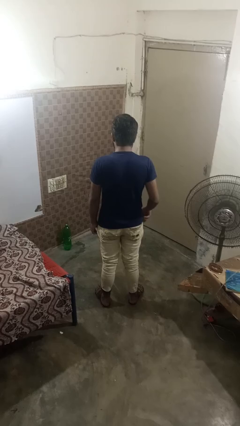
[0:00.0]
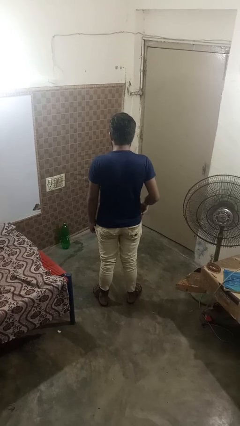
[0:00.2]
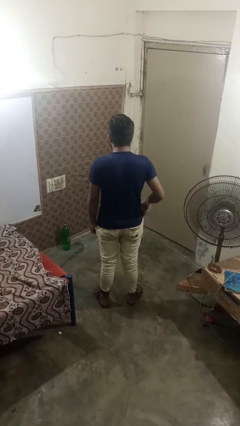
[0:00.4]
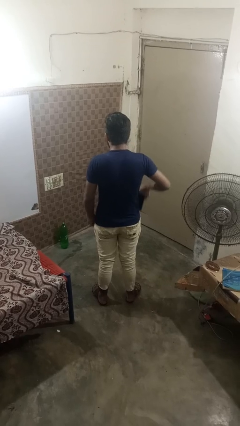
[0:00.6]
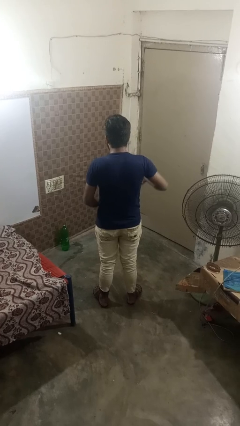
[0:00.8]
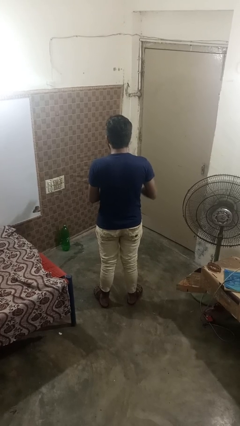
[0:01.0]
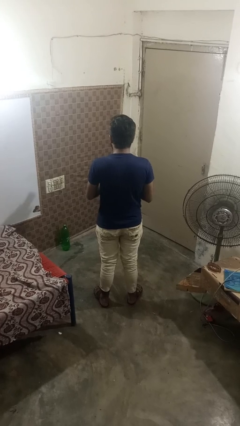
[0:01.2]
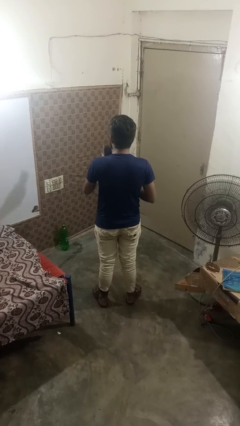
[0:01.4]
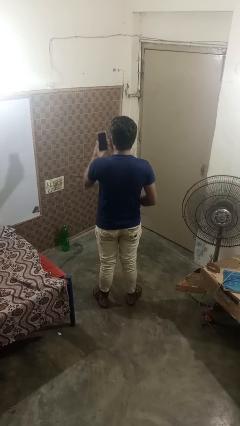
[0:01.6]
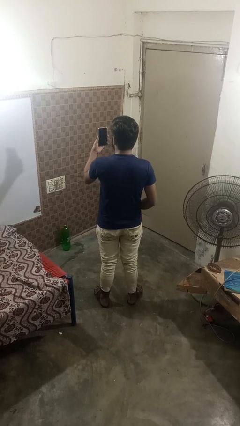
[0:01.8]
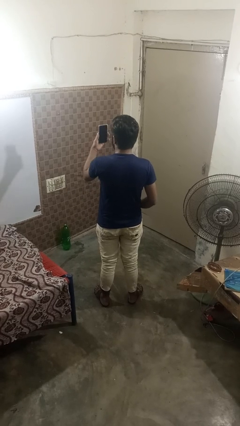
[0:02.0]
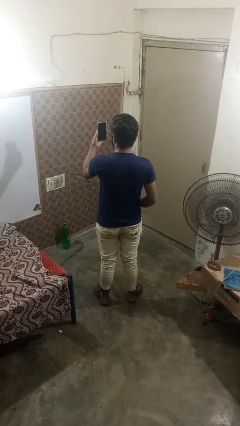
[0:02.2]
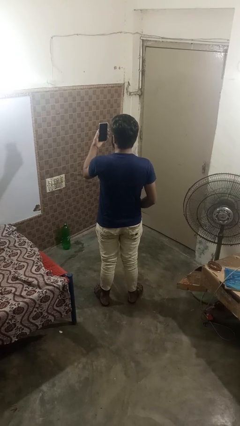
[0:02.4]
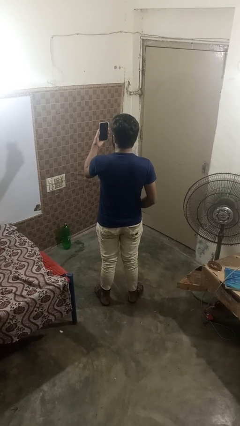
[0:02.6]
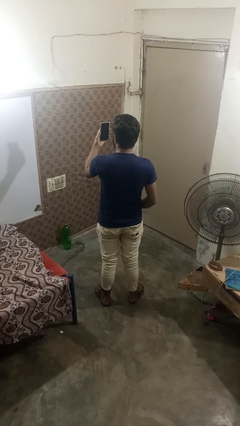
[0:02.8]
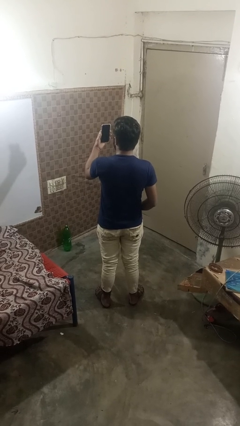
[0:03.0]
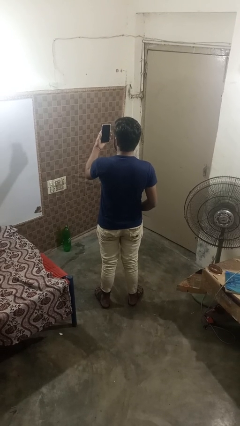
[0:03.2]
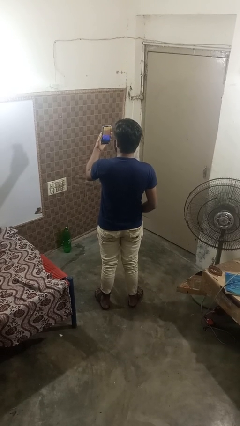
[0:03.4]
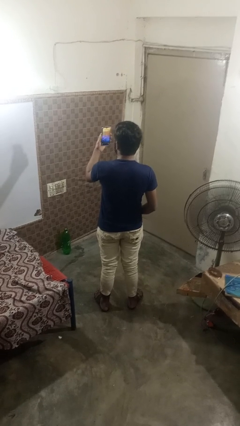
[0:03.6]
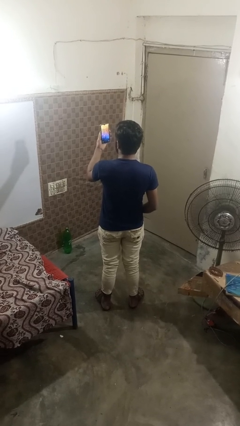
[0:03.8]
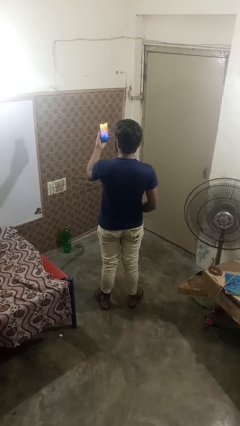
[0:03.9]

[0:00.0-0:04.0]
person takes phone from pocket

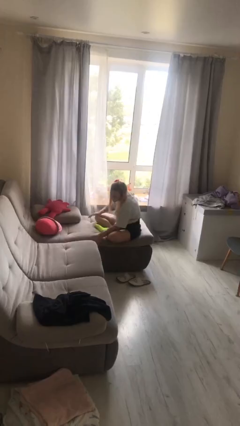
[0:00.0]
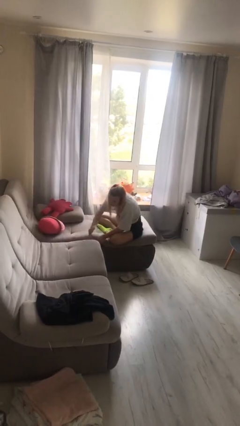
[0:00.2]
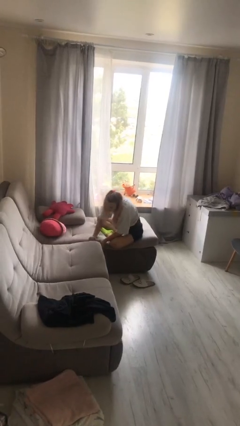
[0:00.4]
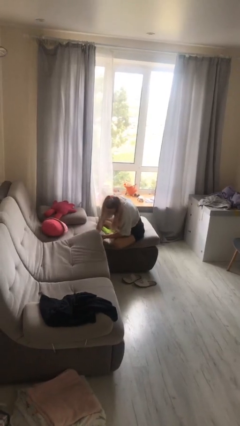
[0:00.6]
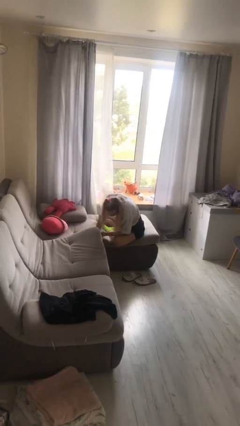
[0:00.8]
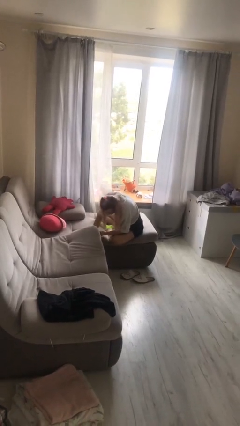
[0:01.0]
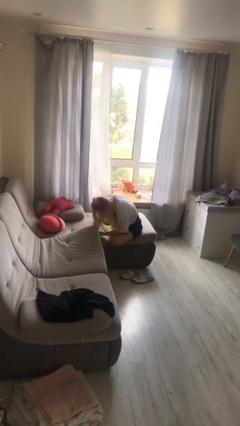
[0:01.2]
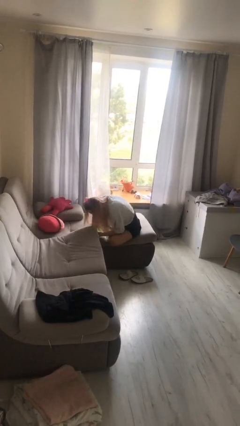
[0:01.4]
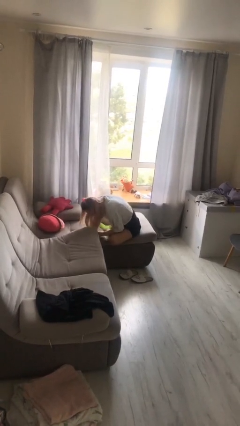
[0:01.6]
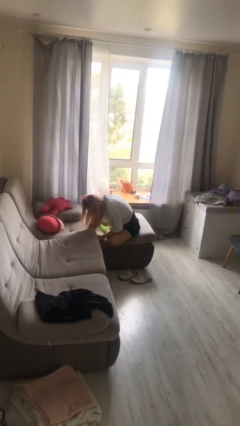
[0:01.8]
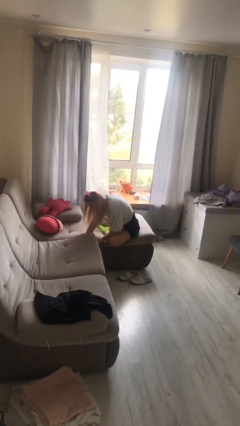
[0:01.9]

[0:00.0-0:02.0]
person searches in couch

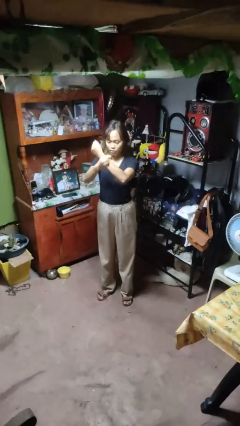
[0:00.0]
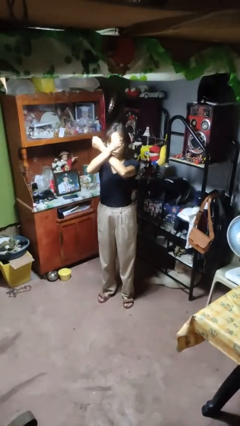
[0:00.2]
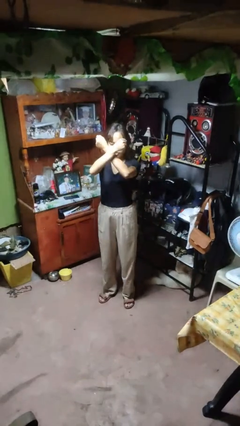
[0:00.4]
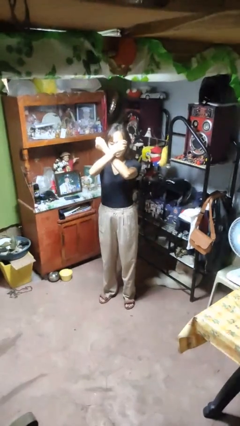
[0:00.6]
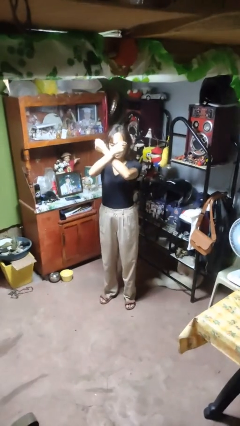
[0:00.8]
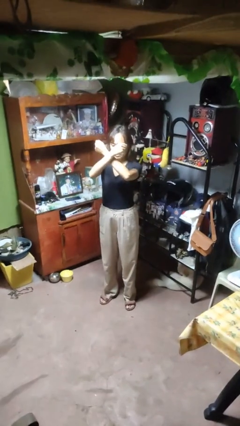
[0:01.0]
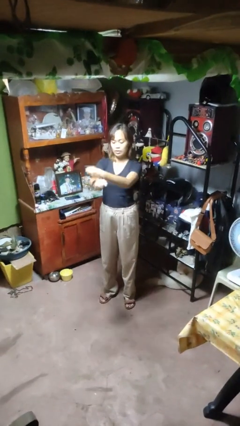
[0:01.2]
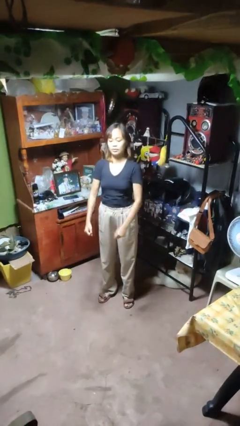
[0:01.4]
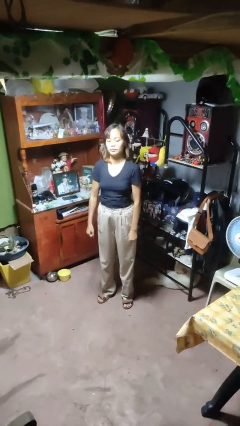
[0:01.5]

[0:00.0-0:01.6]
person gestures arms x

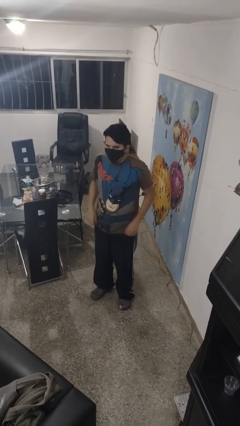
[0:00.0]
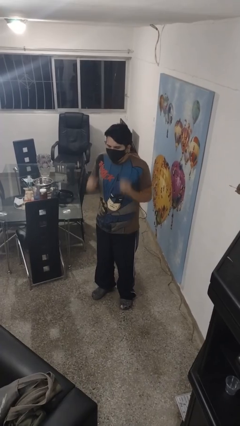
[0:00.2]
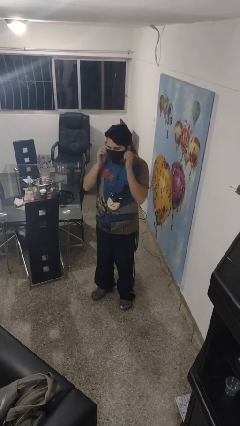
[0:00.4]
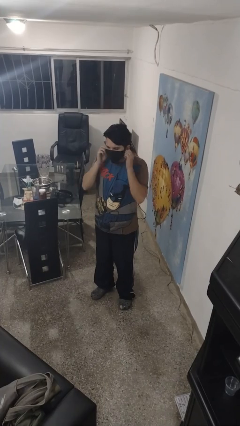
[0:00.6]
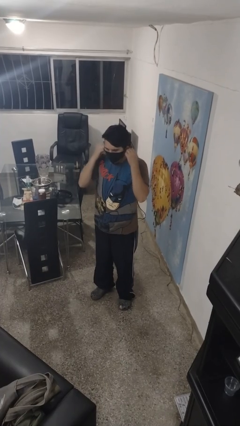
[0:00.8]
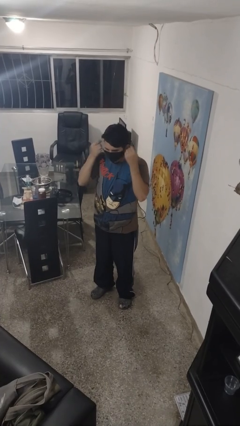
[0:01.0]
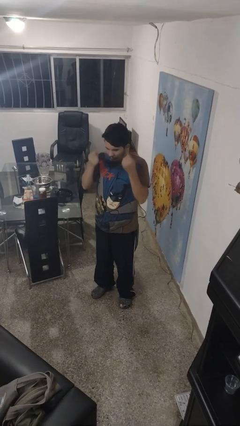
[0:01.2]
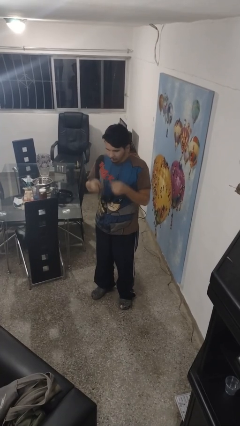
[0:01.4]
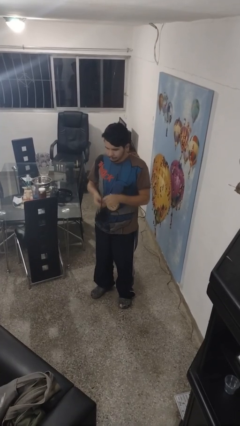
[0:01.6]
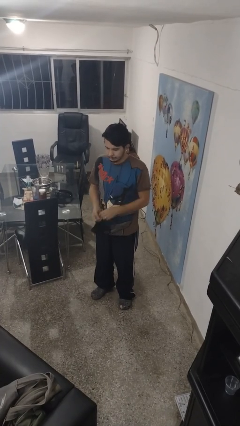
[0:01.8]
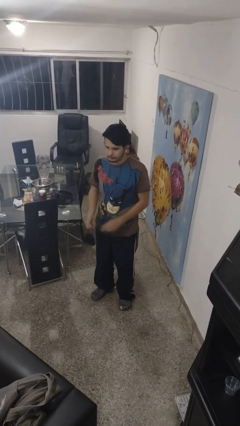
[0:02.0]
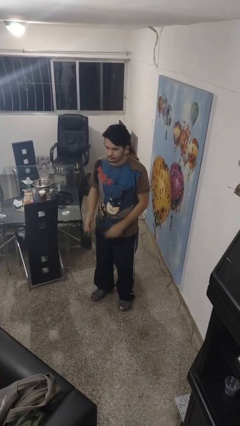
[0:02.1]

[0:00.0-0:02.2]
person takes off facemask

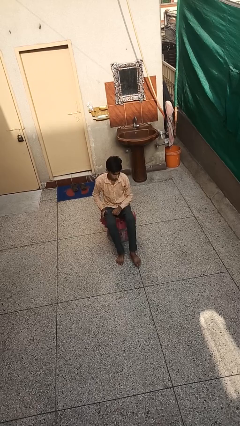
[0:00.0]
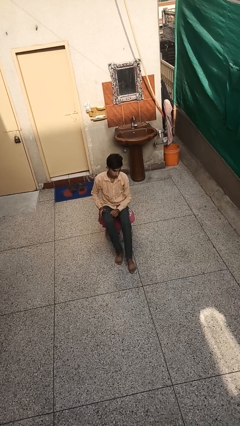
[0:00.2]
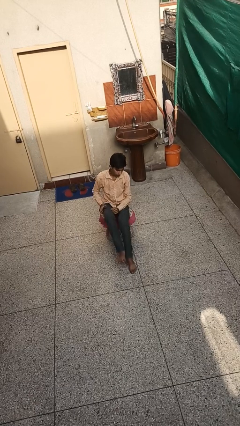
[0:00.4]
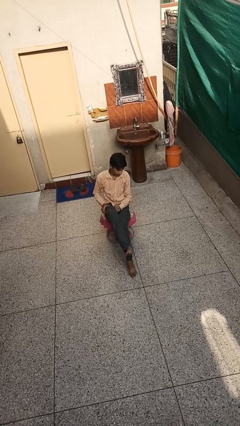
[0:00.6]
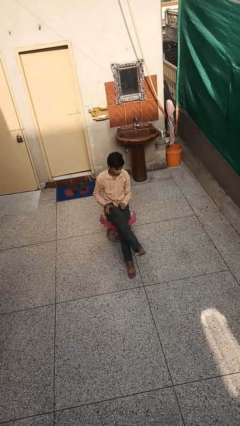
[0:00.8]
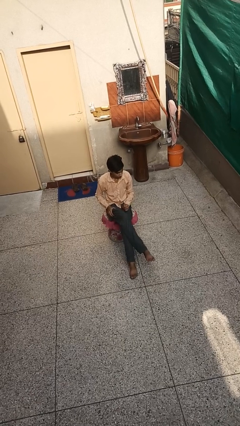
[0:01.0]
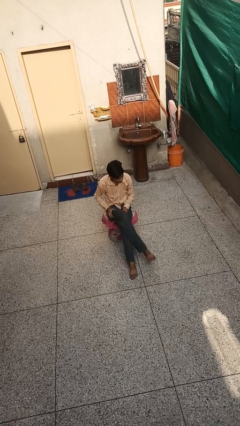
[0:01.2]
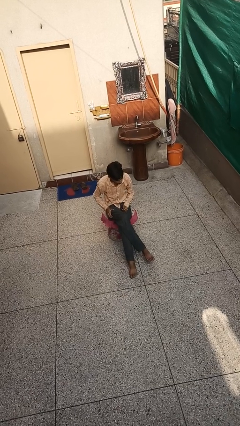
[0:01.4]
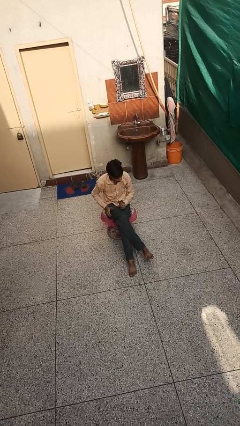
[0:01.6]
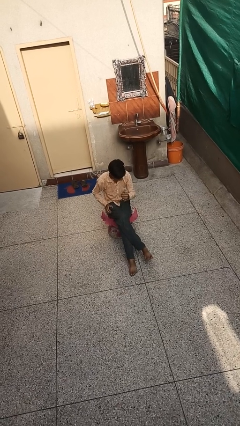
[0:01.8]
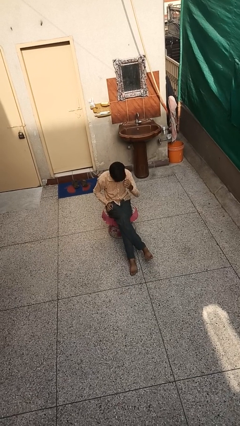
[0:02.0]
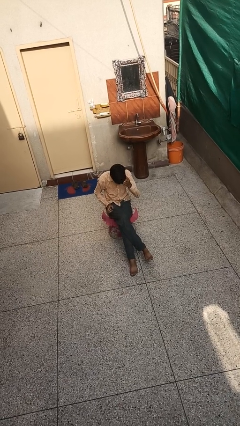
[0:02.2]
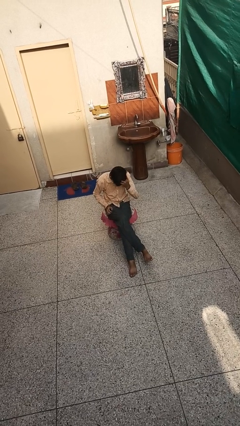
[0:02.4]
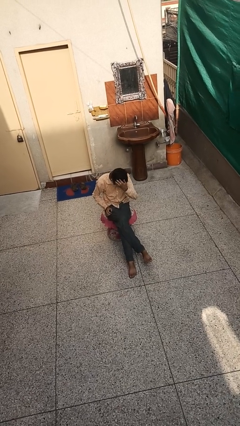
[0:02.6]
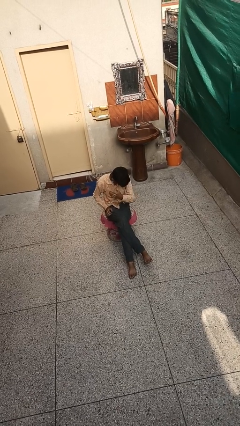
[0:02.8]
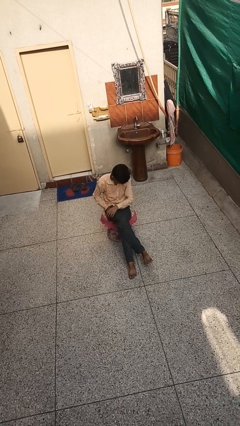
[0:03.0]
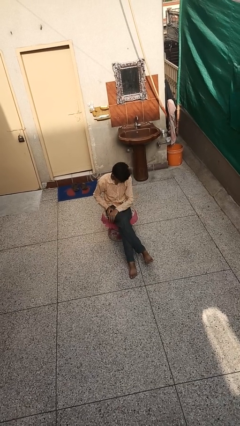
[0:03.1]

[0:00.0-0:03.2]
person crosses legs

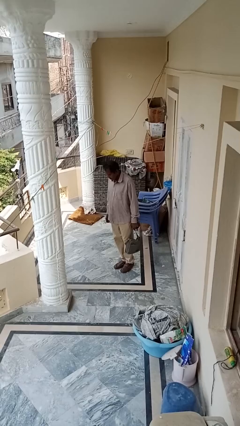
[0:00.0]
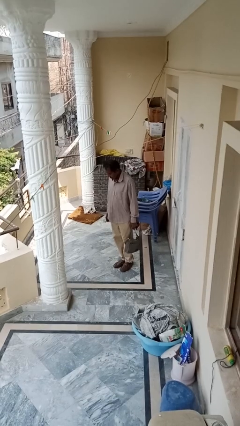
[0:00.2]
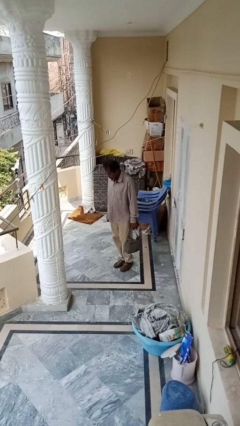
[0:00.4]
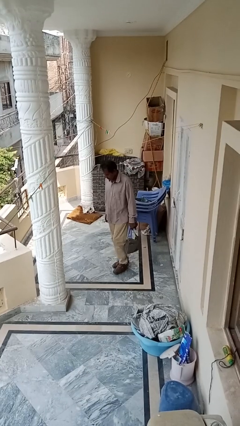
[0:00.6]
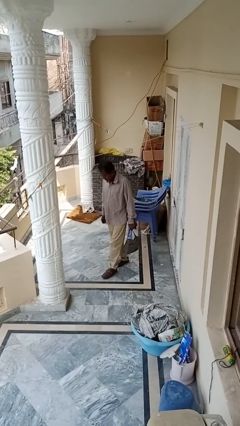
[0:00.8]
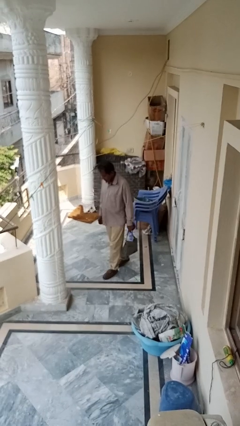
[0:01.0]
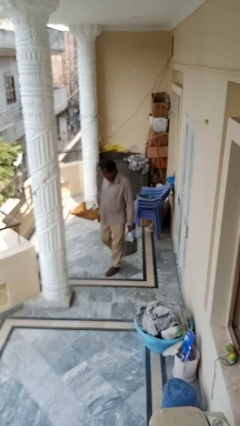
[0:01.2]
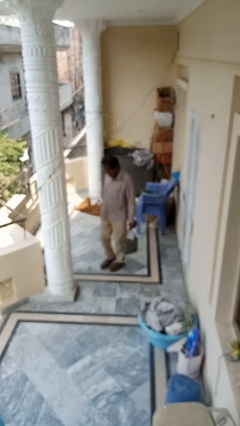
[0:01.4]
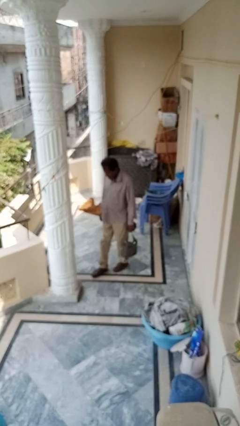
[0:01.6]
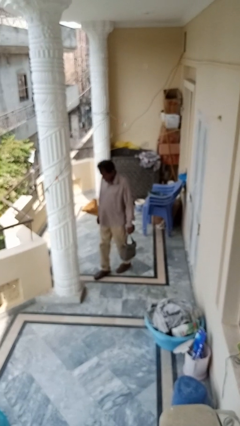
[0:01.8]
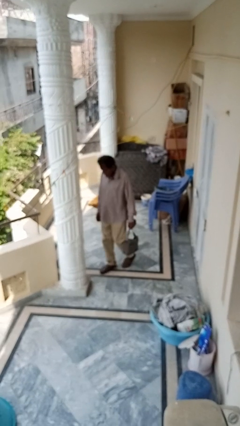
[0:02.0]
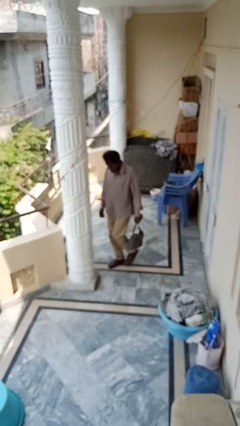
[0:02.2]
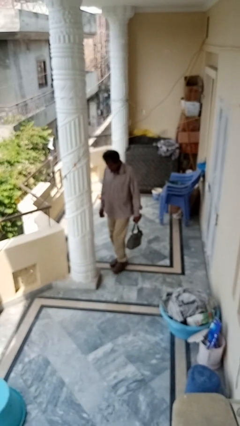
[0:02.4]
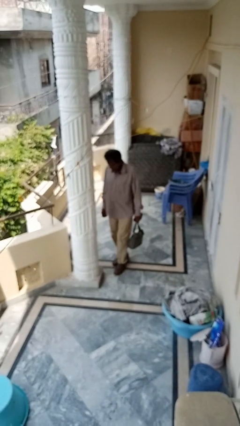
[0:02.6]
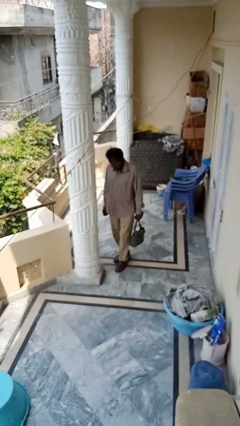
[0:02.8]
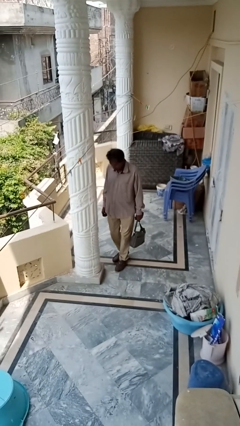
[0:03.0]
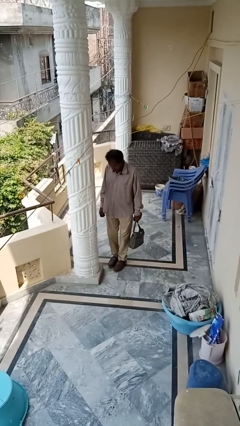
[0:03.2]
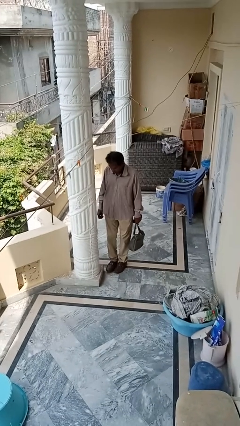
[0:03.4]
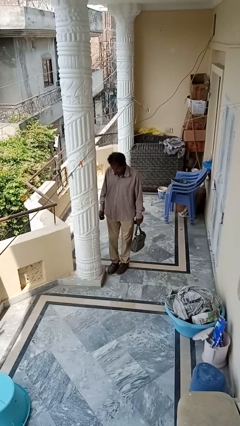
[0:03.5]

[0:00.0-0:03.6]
person carries groceries

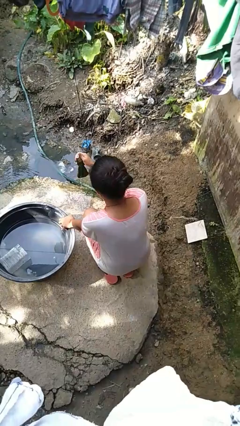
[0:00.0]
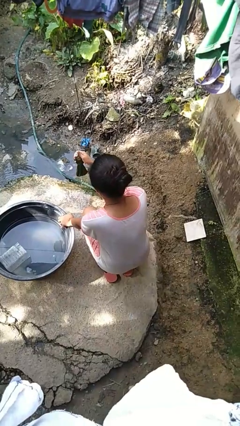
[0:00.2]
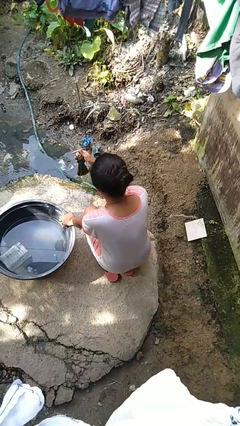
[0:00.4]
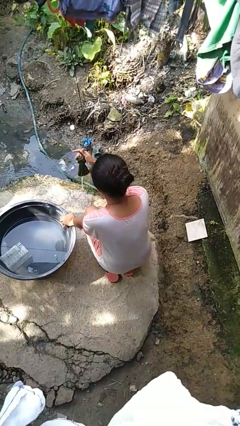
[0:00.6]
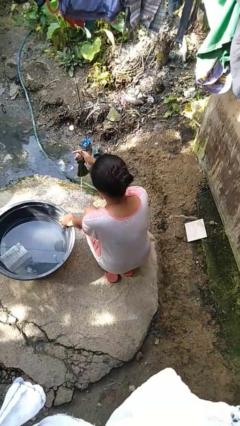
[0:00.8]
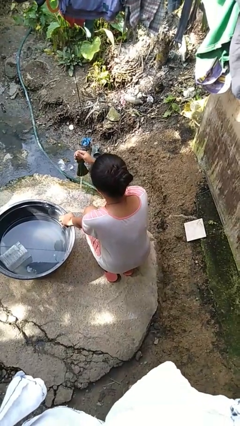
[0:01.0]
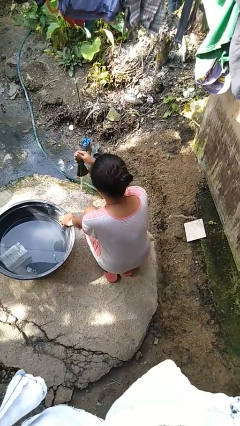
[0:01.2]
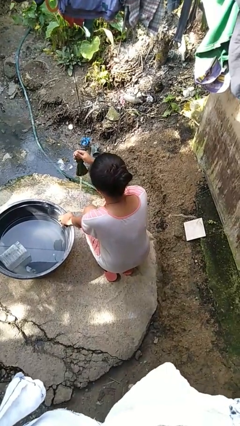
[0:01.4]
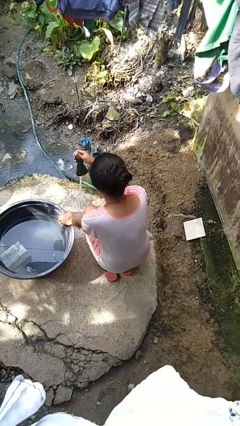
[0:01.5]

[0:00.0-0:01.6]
person turns on faucet
